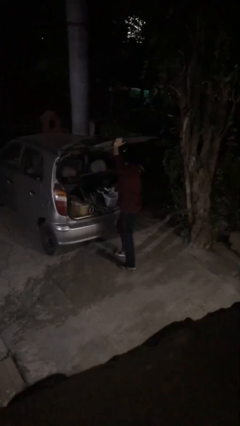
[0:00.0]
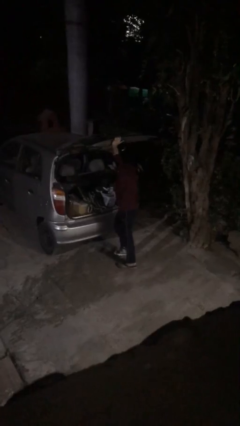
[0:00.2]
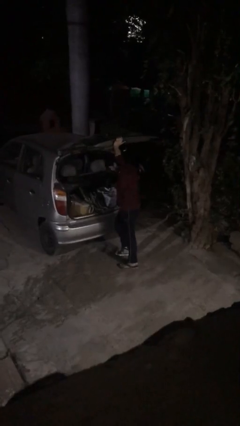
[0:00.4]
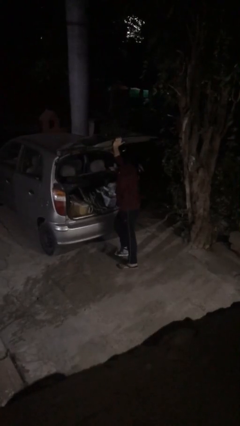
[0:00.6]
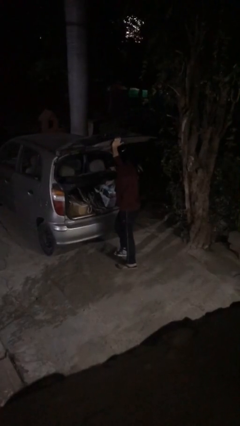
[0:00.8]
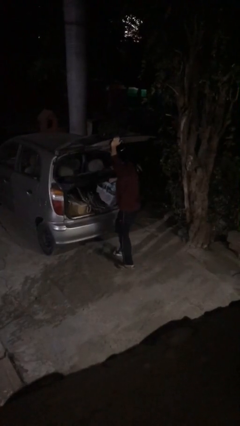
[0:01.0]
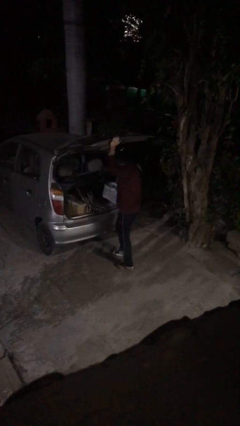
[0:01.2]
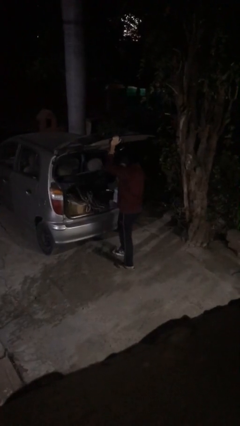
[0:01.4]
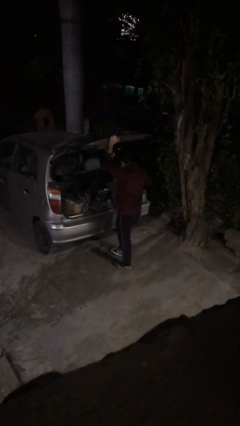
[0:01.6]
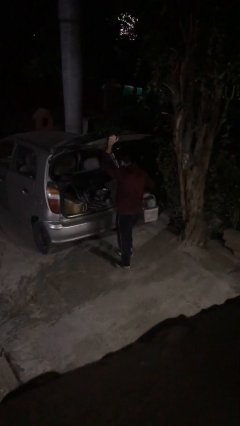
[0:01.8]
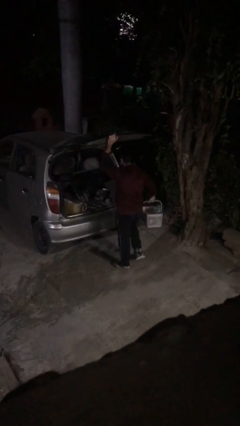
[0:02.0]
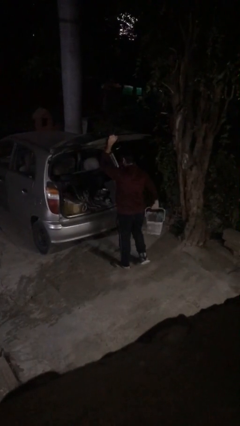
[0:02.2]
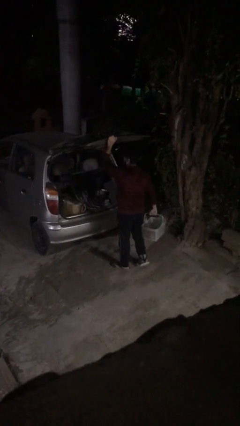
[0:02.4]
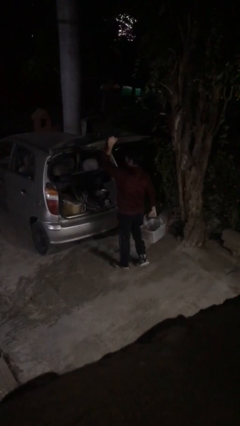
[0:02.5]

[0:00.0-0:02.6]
person unloads car

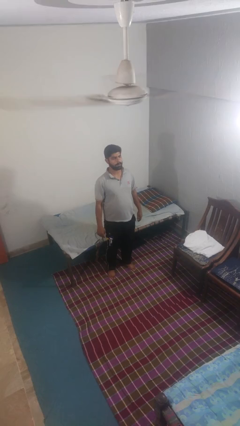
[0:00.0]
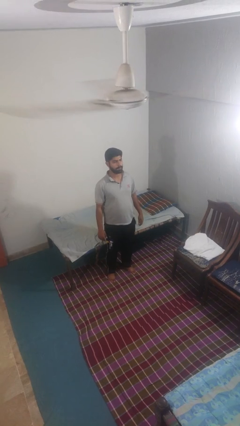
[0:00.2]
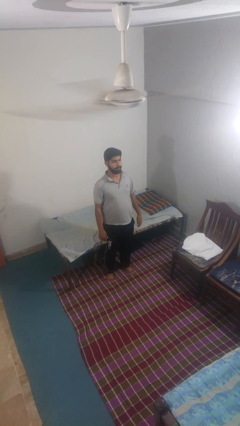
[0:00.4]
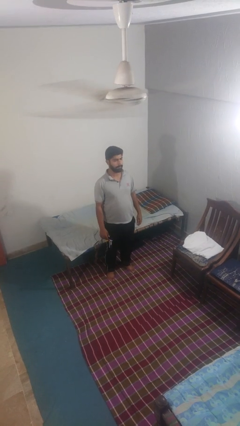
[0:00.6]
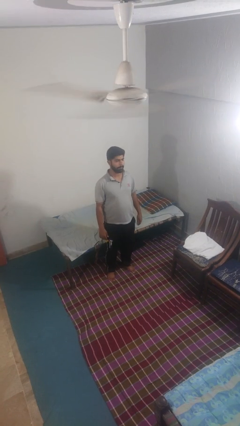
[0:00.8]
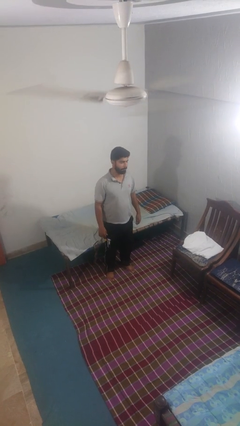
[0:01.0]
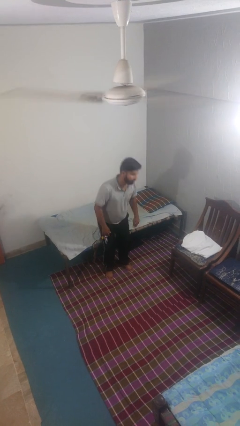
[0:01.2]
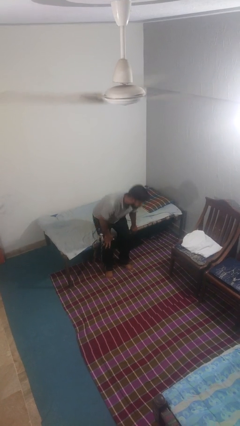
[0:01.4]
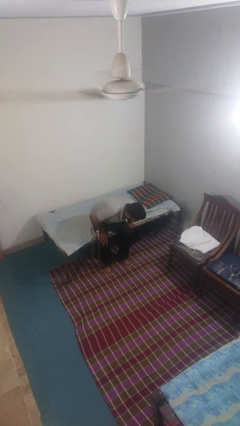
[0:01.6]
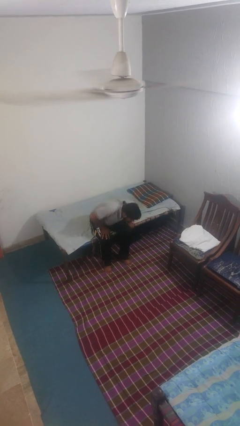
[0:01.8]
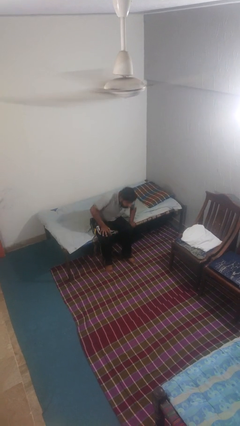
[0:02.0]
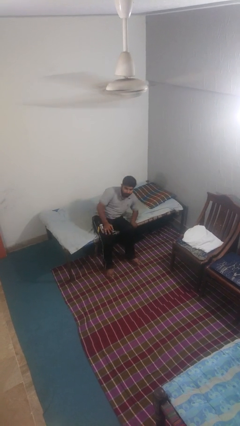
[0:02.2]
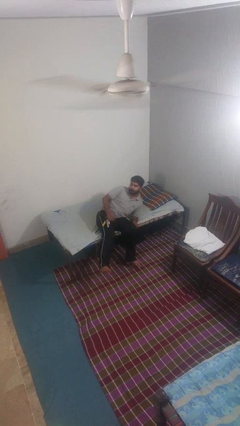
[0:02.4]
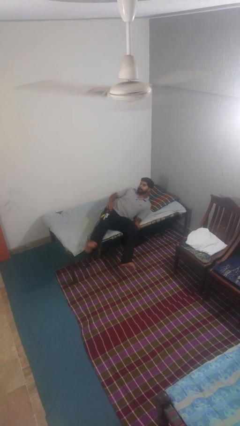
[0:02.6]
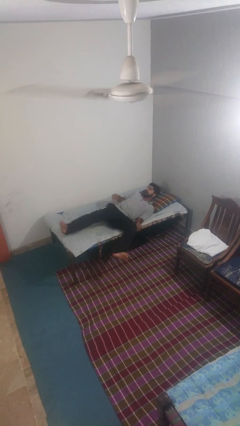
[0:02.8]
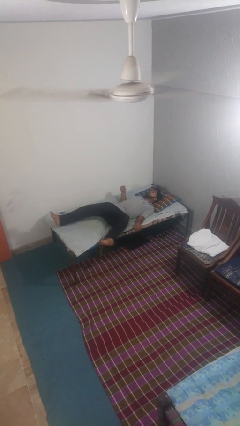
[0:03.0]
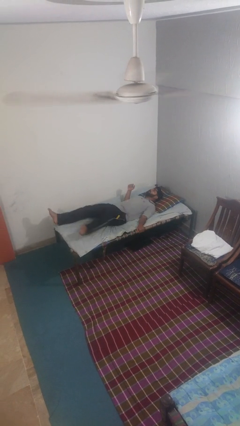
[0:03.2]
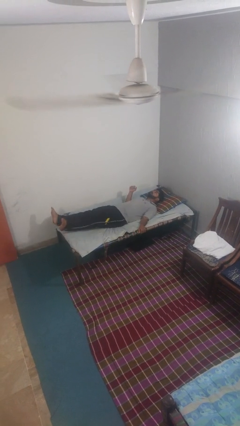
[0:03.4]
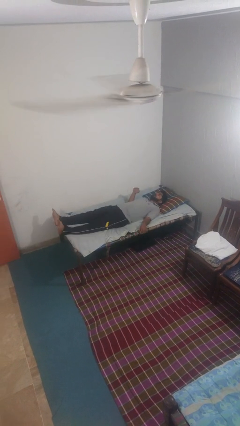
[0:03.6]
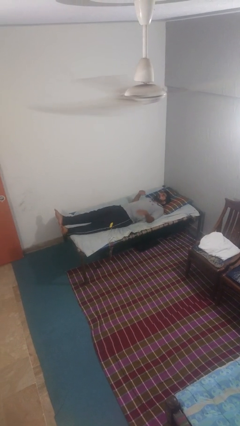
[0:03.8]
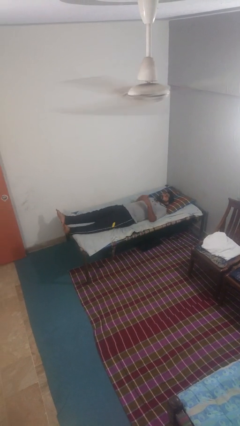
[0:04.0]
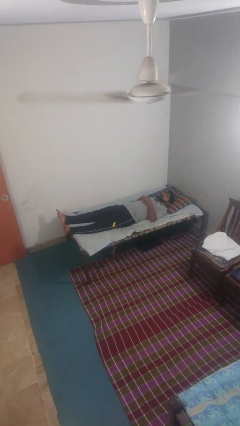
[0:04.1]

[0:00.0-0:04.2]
person lies down on bed

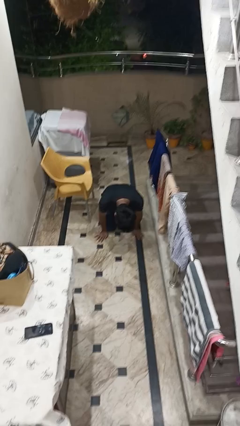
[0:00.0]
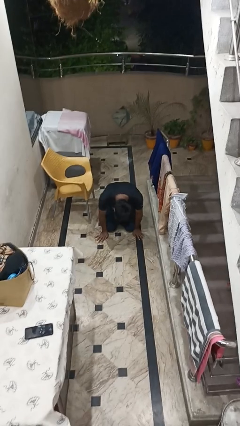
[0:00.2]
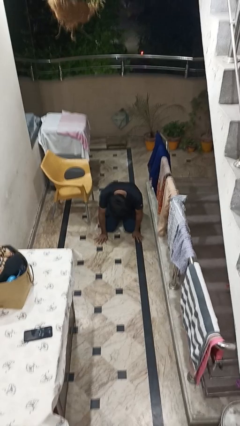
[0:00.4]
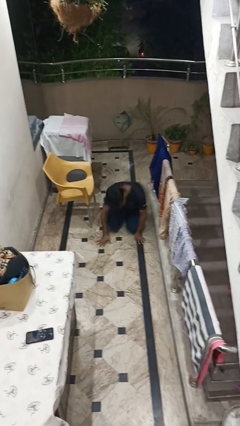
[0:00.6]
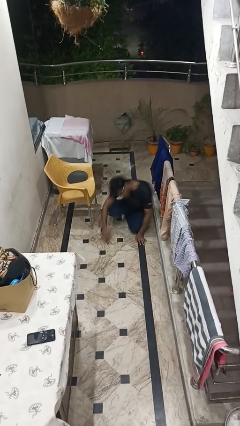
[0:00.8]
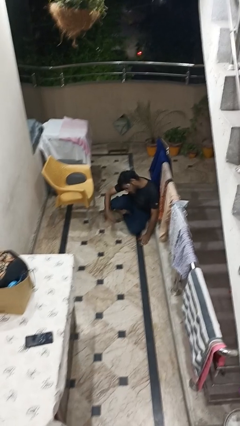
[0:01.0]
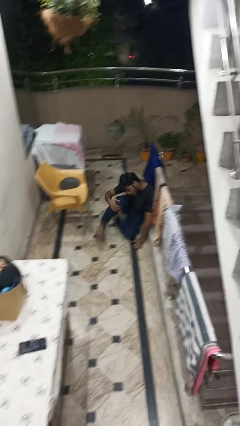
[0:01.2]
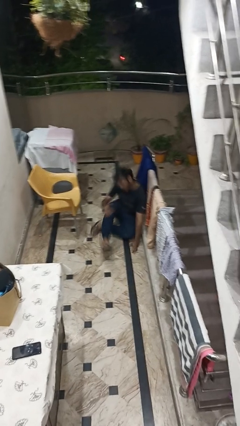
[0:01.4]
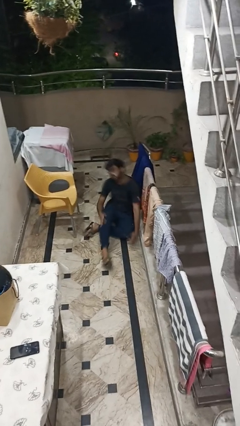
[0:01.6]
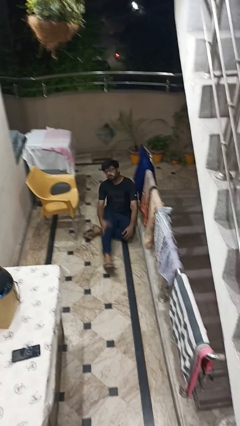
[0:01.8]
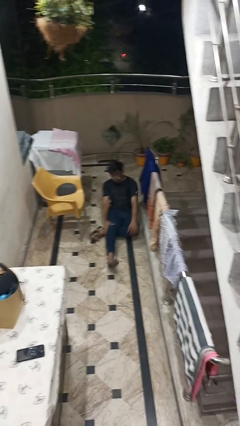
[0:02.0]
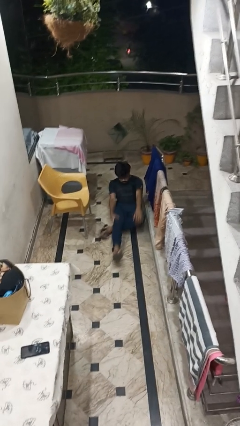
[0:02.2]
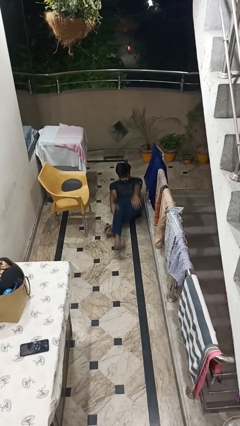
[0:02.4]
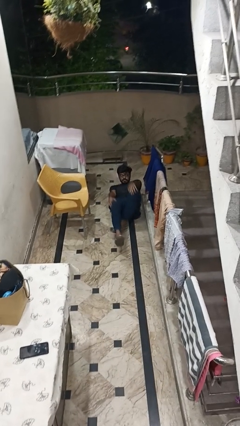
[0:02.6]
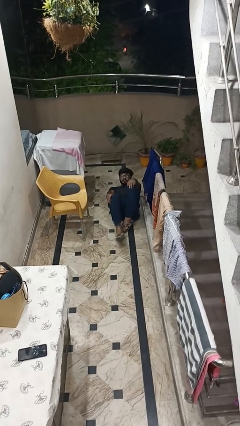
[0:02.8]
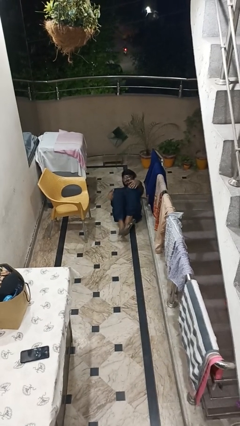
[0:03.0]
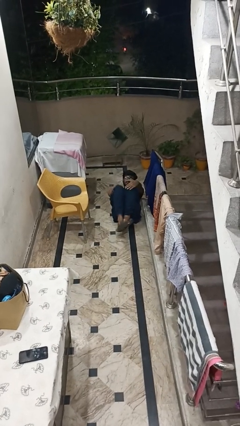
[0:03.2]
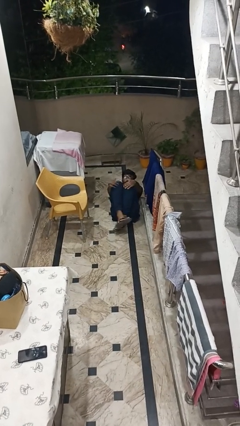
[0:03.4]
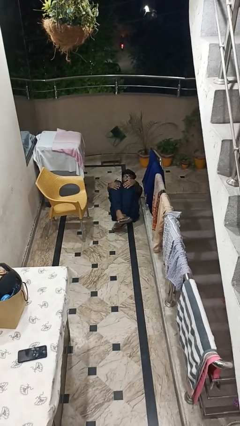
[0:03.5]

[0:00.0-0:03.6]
person lies down on floor

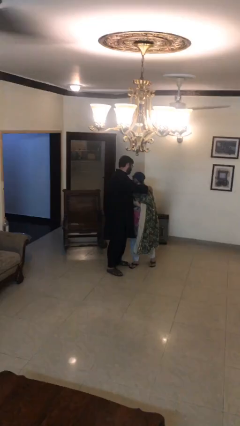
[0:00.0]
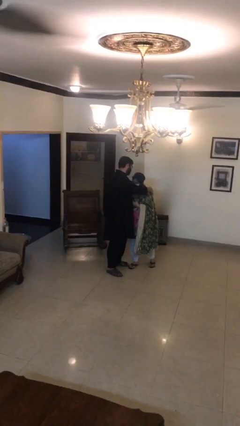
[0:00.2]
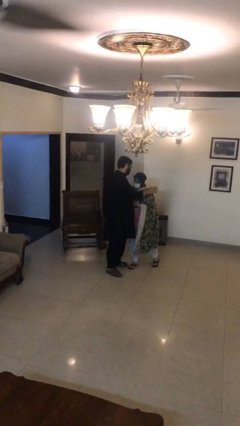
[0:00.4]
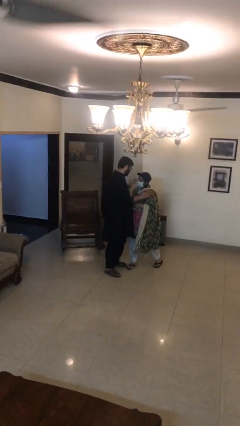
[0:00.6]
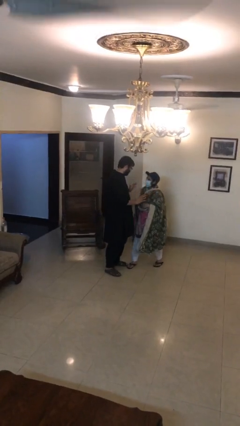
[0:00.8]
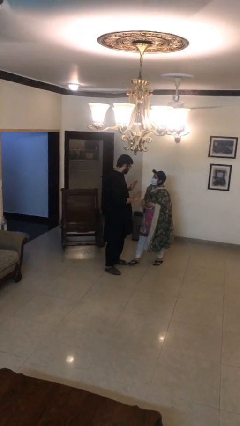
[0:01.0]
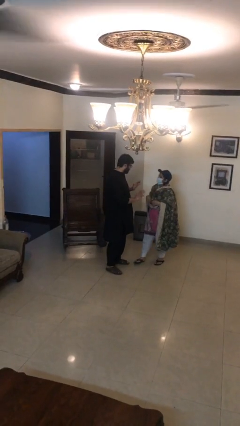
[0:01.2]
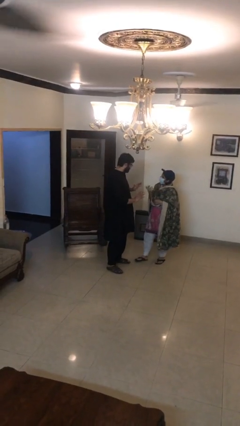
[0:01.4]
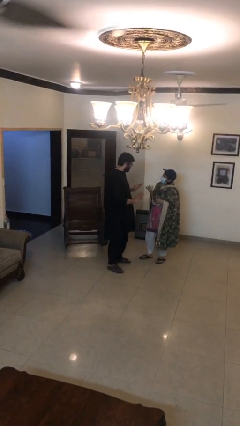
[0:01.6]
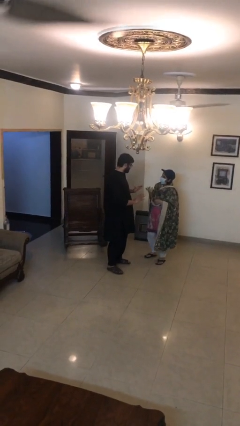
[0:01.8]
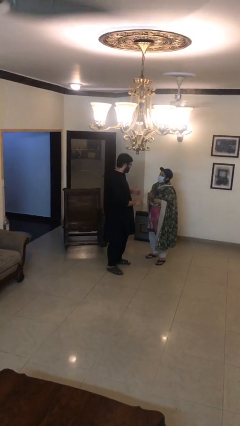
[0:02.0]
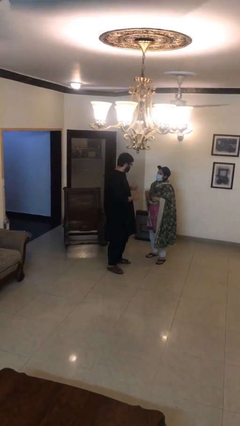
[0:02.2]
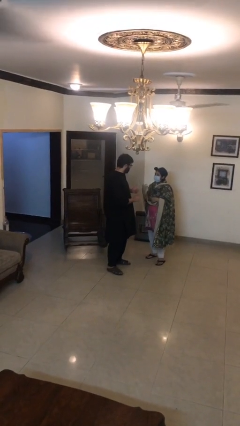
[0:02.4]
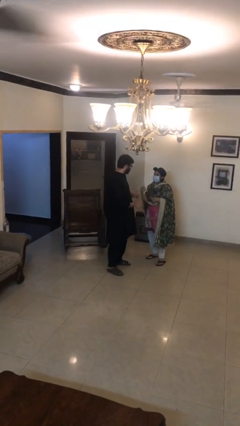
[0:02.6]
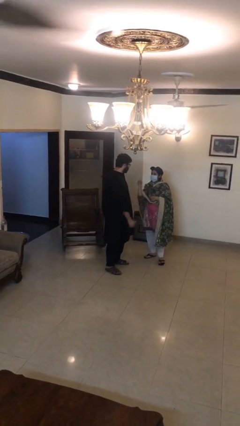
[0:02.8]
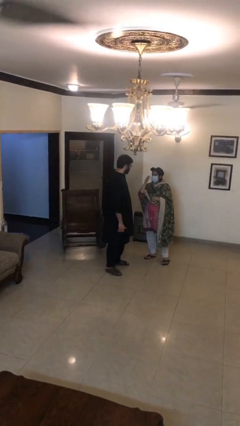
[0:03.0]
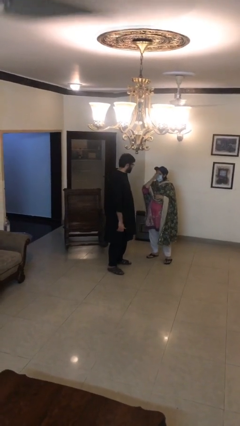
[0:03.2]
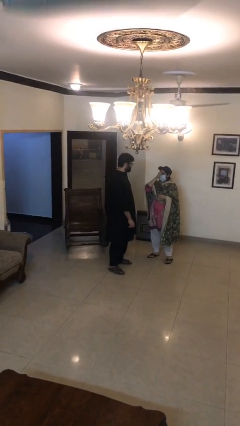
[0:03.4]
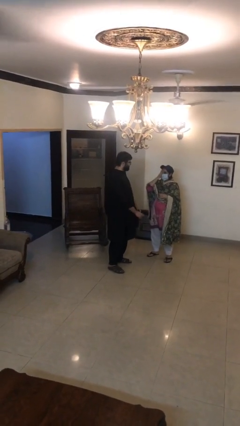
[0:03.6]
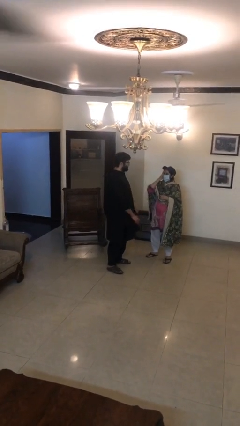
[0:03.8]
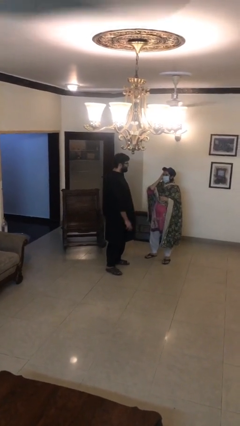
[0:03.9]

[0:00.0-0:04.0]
person talks to person

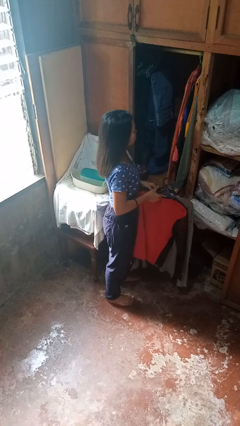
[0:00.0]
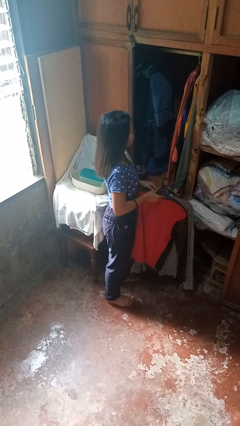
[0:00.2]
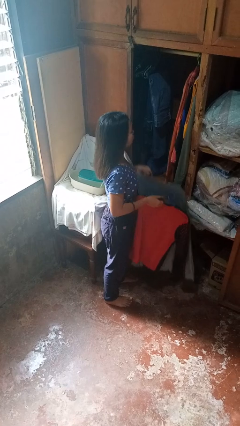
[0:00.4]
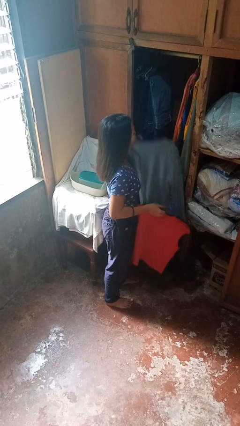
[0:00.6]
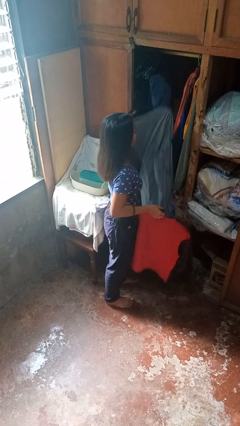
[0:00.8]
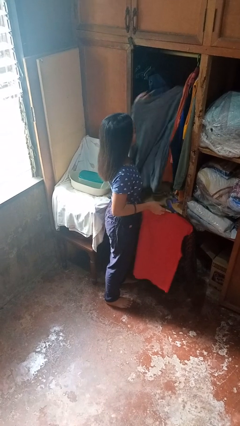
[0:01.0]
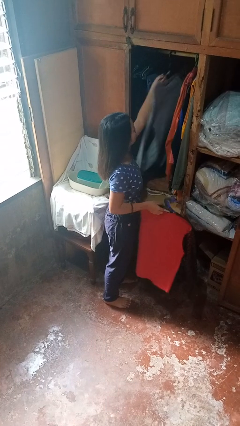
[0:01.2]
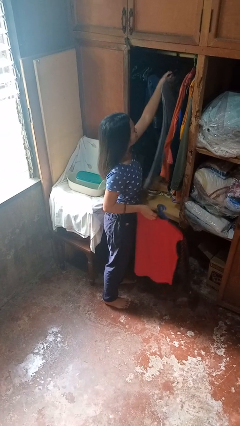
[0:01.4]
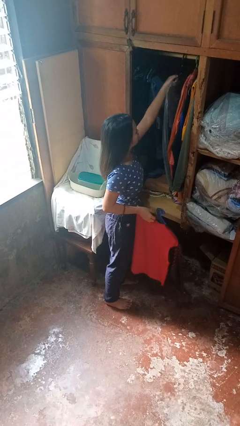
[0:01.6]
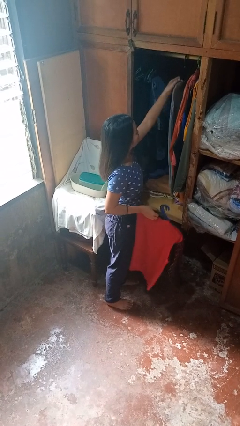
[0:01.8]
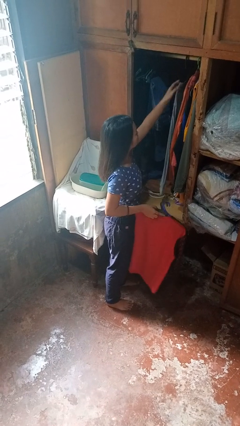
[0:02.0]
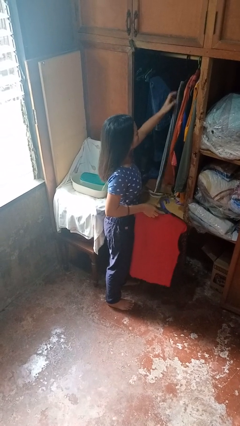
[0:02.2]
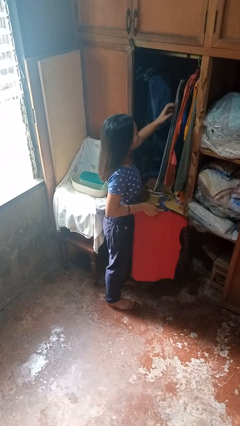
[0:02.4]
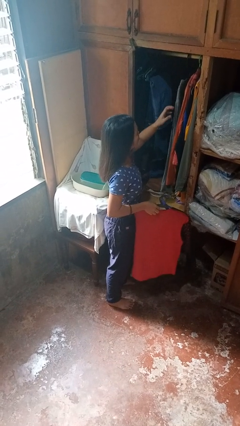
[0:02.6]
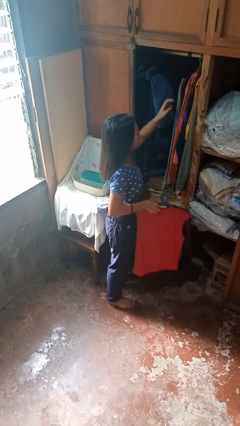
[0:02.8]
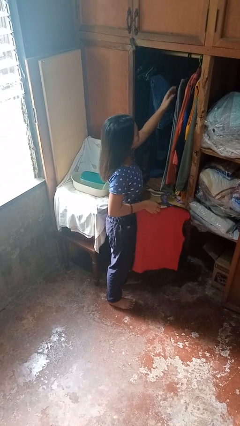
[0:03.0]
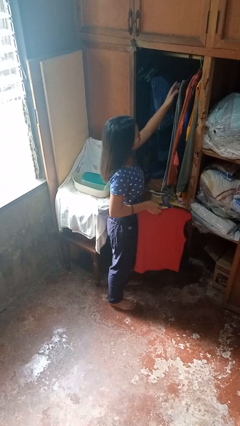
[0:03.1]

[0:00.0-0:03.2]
person puts clothes into closet

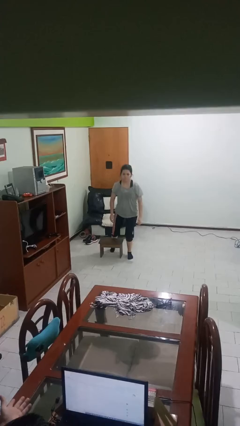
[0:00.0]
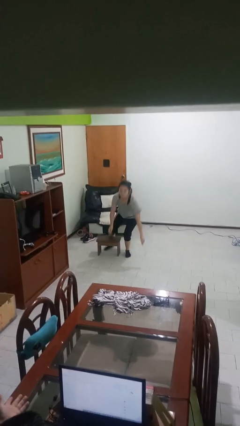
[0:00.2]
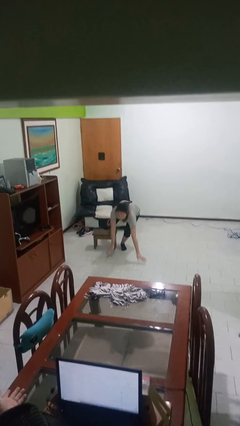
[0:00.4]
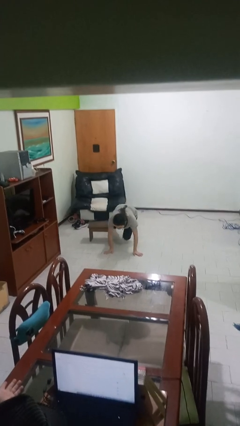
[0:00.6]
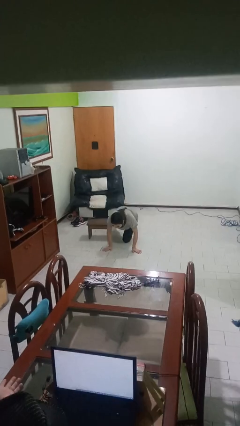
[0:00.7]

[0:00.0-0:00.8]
person trips on object on floor
